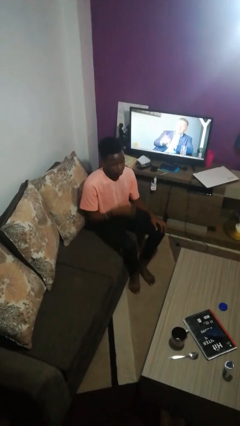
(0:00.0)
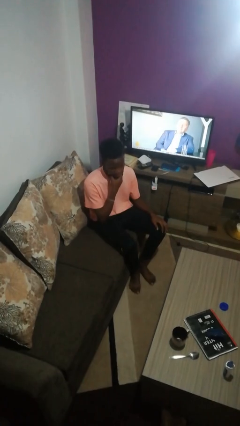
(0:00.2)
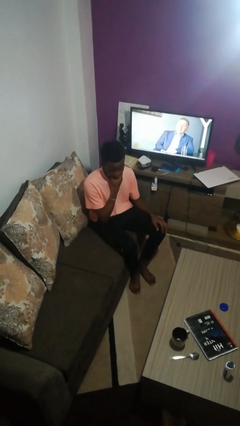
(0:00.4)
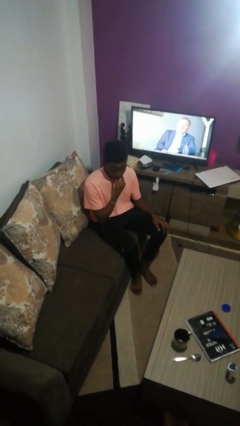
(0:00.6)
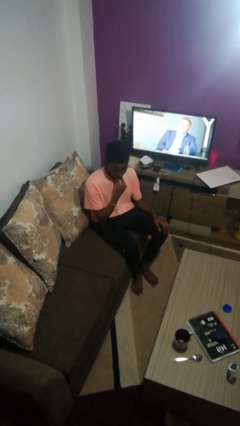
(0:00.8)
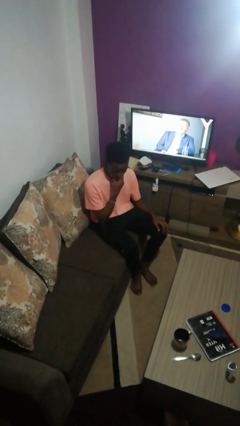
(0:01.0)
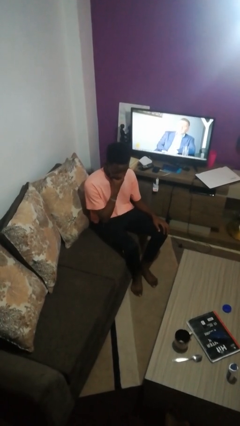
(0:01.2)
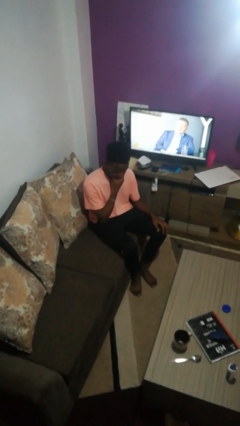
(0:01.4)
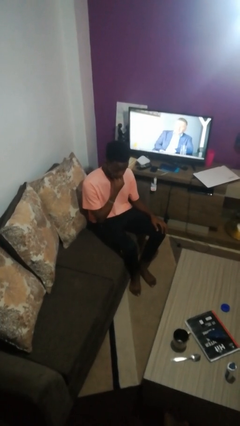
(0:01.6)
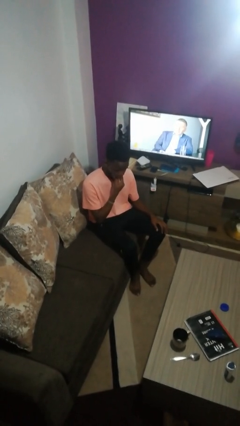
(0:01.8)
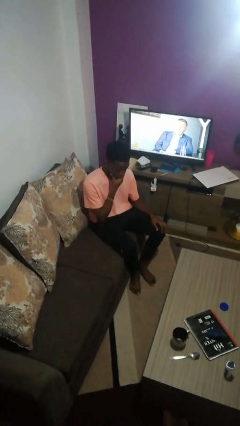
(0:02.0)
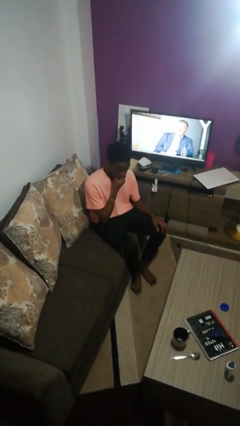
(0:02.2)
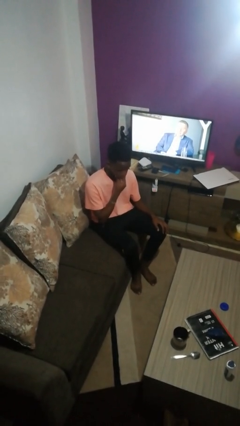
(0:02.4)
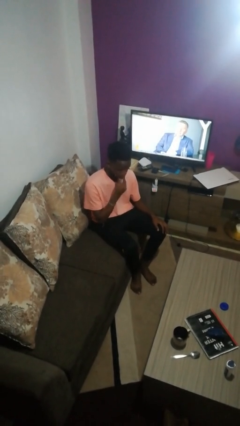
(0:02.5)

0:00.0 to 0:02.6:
person strokes chin

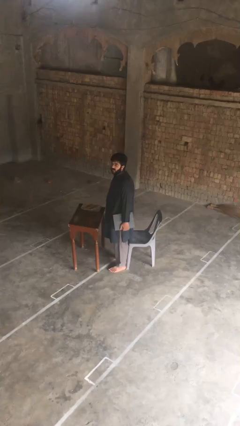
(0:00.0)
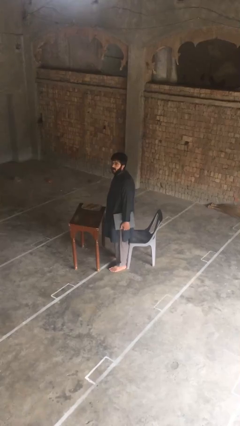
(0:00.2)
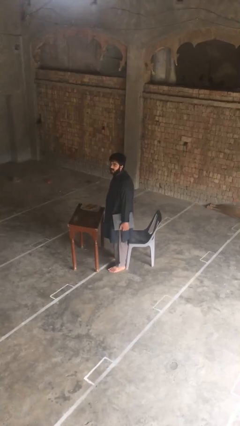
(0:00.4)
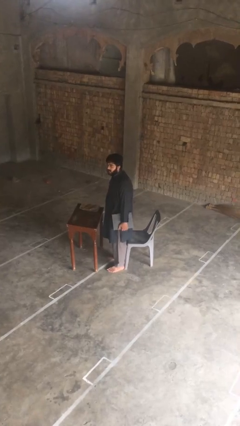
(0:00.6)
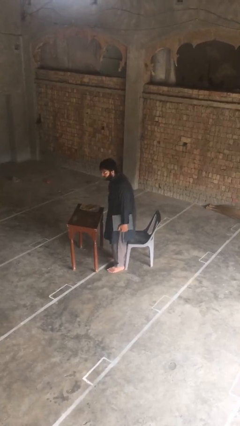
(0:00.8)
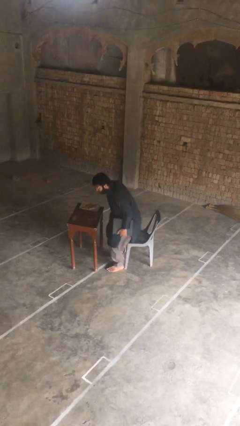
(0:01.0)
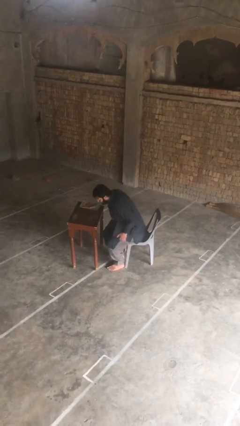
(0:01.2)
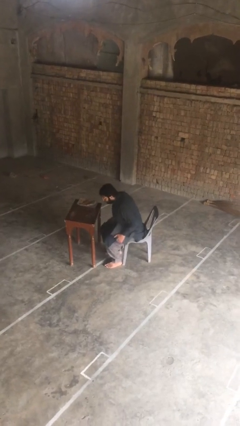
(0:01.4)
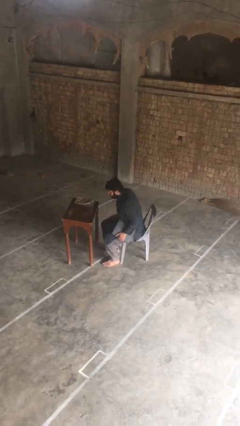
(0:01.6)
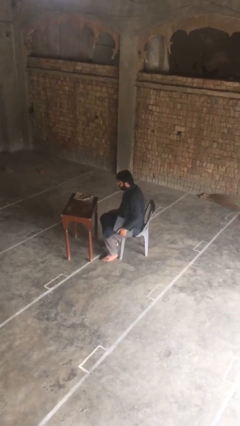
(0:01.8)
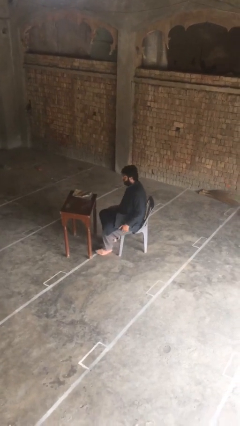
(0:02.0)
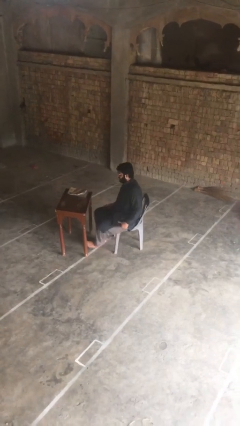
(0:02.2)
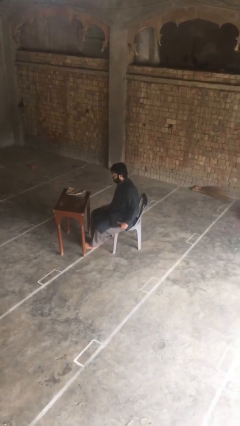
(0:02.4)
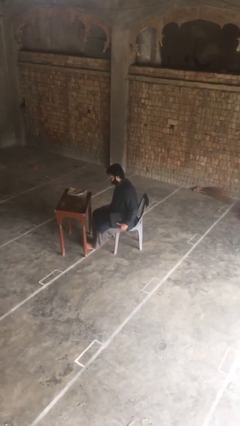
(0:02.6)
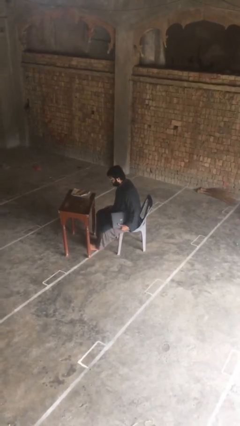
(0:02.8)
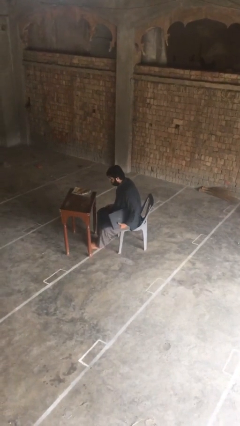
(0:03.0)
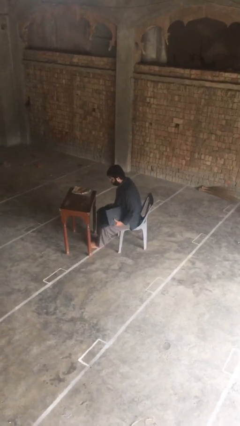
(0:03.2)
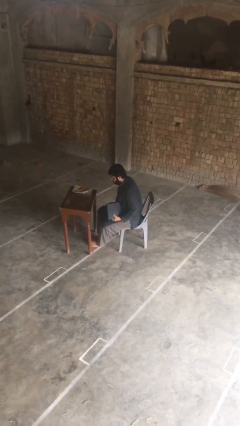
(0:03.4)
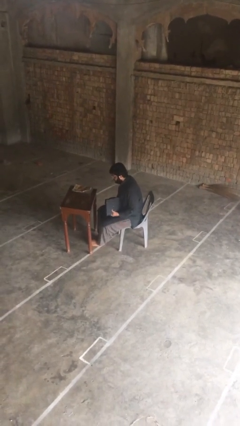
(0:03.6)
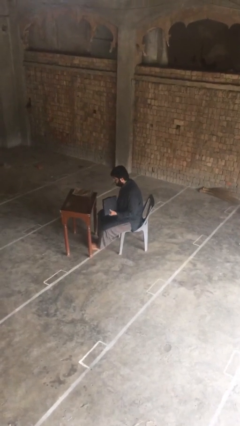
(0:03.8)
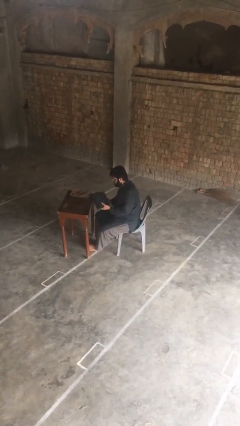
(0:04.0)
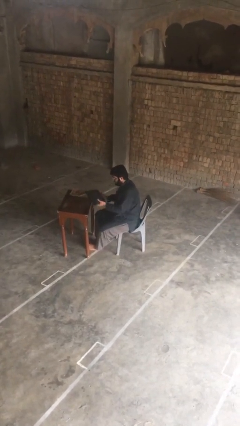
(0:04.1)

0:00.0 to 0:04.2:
person sits down

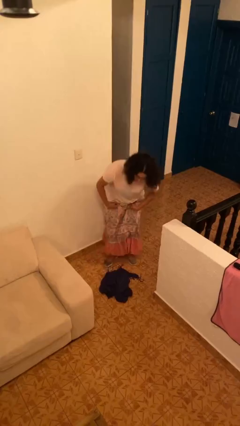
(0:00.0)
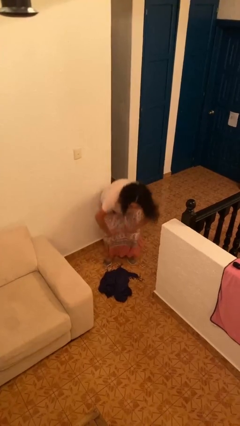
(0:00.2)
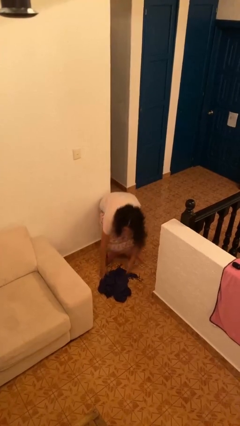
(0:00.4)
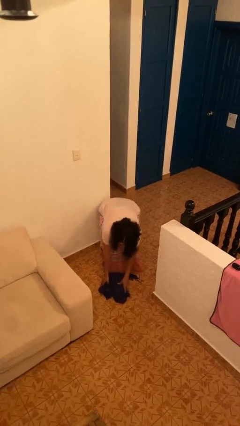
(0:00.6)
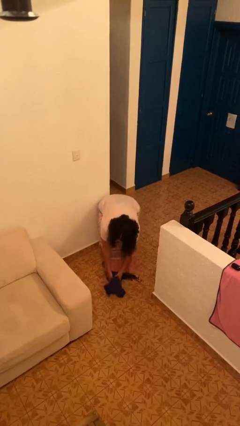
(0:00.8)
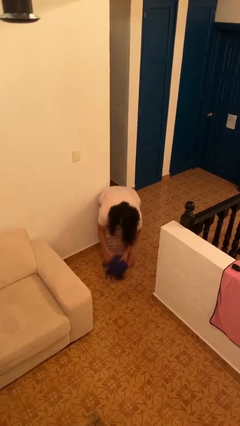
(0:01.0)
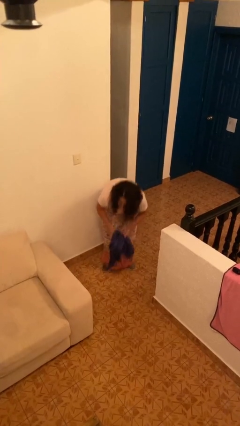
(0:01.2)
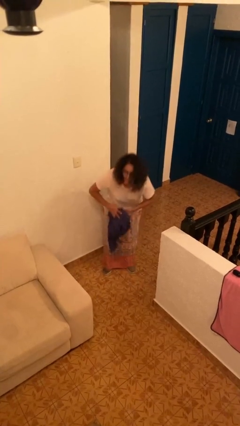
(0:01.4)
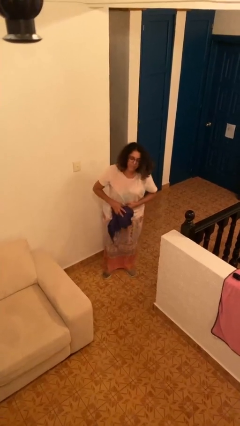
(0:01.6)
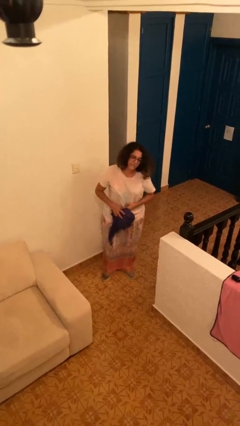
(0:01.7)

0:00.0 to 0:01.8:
person picks up object from floor

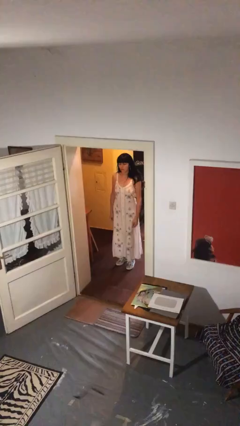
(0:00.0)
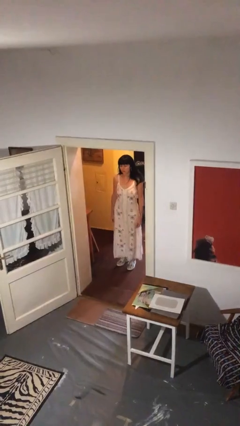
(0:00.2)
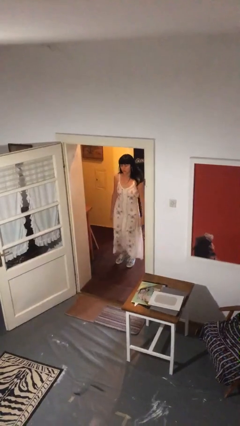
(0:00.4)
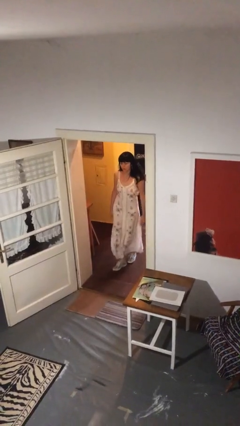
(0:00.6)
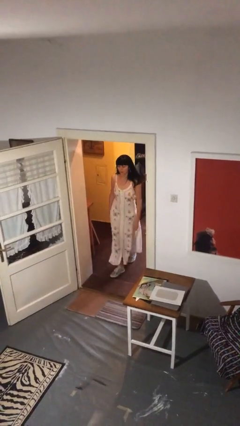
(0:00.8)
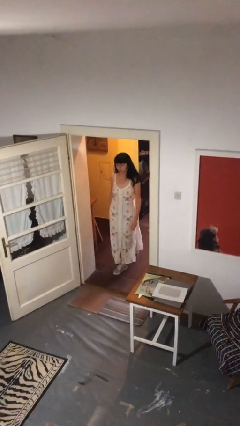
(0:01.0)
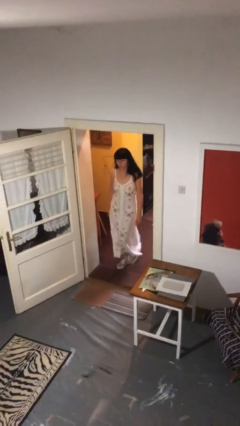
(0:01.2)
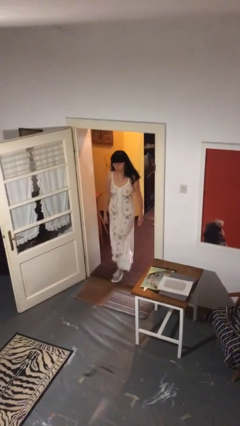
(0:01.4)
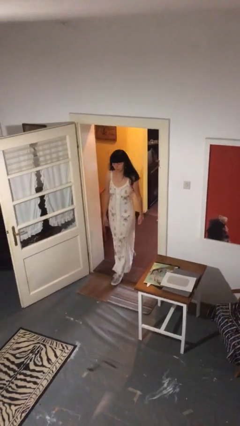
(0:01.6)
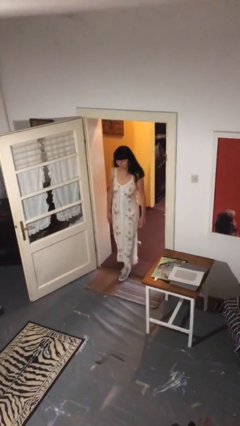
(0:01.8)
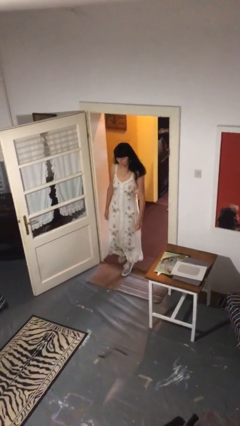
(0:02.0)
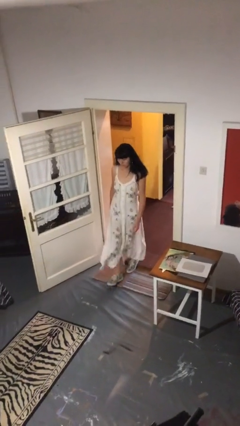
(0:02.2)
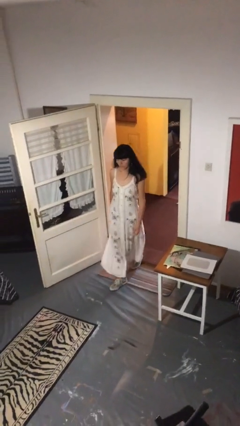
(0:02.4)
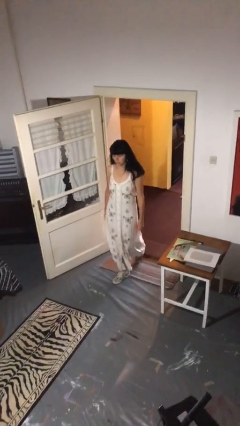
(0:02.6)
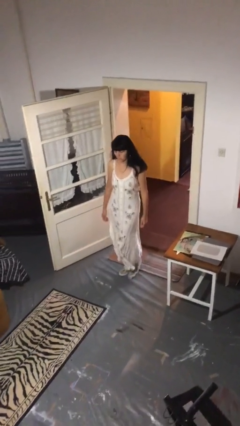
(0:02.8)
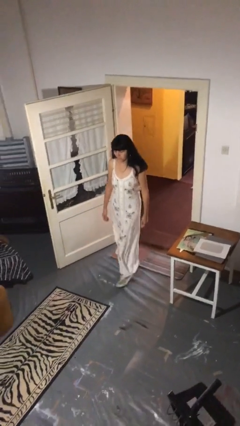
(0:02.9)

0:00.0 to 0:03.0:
person enters scene through structure

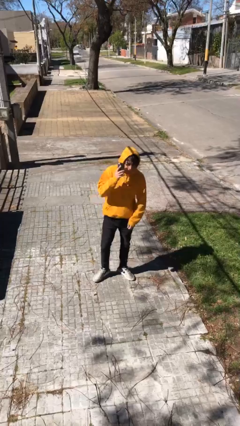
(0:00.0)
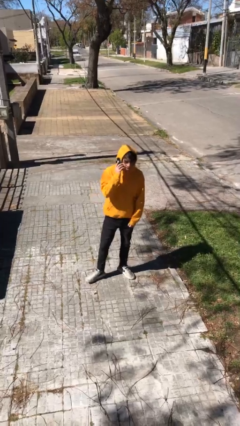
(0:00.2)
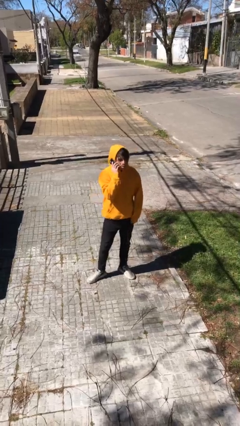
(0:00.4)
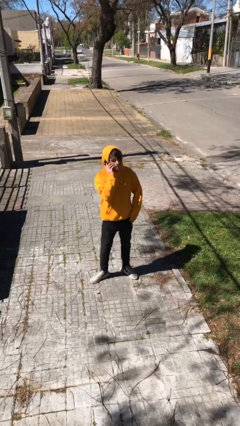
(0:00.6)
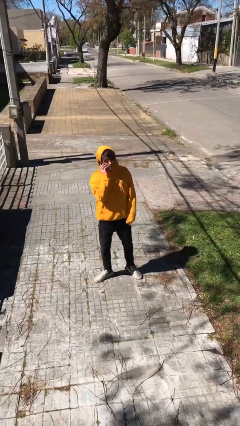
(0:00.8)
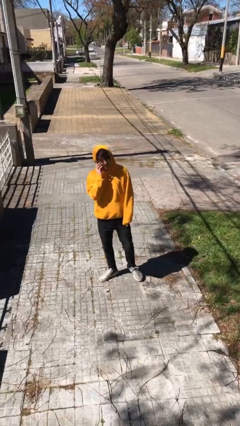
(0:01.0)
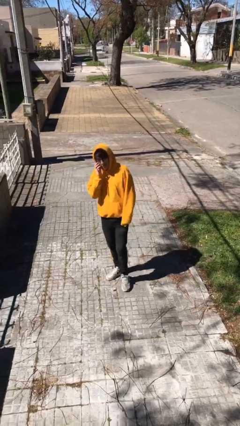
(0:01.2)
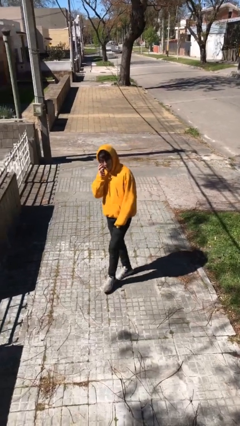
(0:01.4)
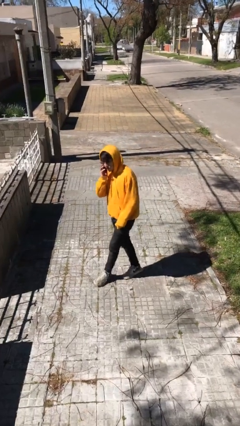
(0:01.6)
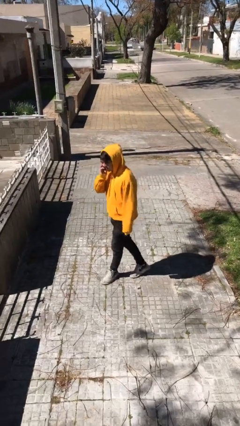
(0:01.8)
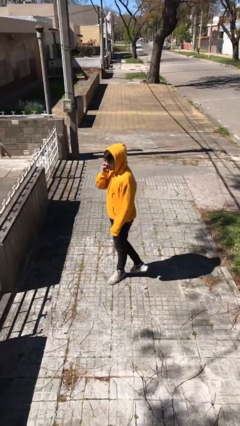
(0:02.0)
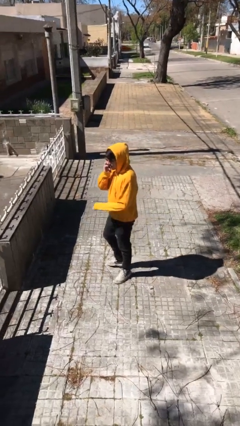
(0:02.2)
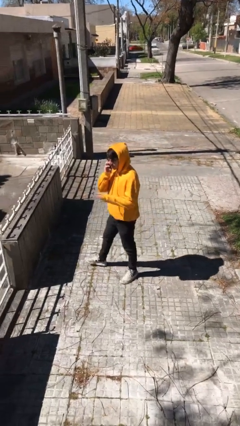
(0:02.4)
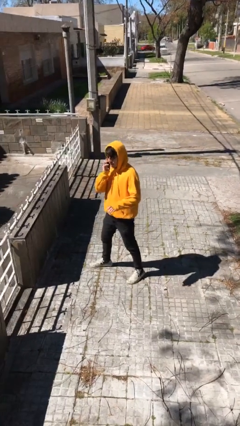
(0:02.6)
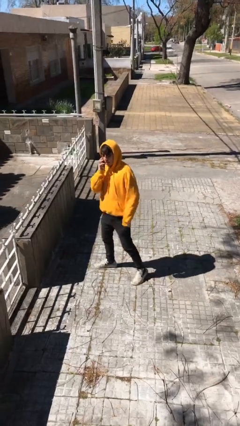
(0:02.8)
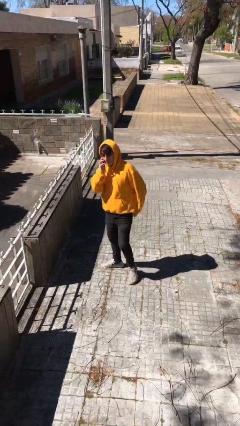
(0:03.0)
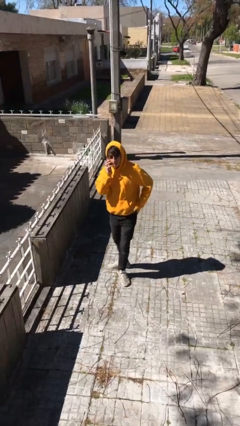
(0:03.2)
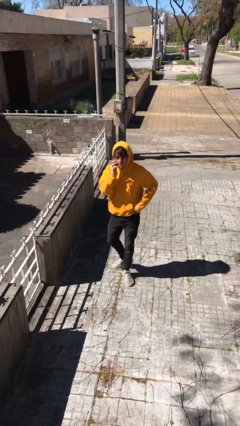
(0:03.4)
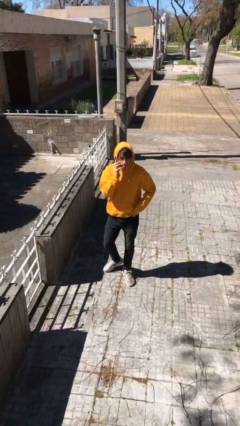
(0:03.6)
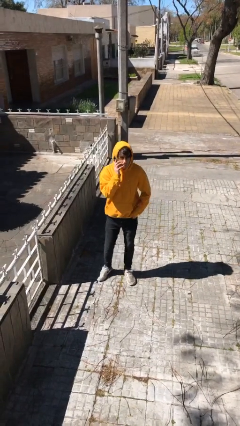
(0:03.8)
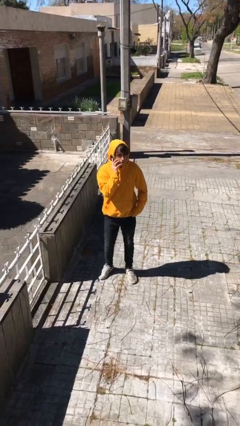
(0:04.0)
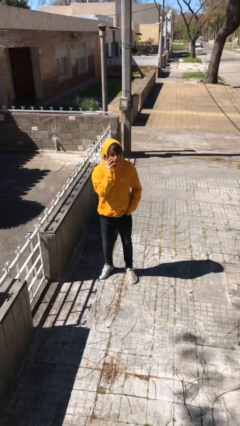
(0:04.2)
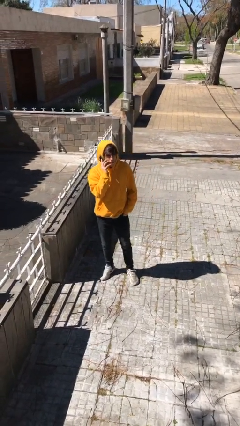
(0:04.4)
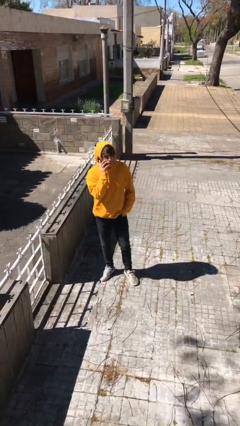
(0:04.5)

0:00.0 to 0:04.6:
person talks on phone

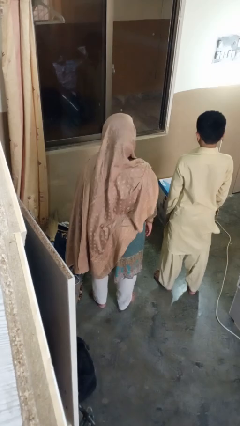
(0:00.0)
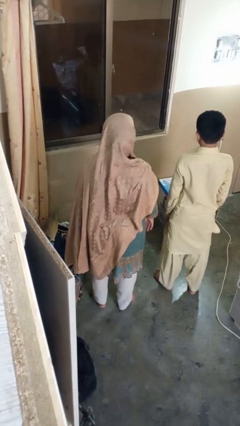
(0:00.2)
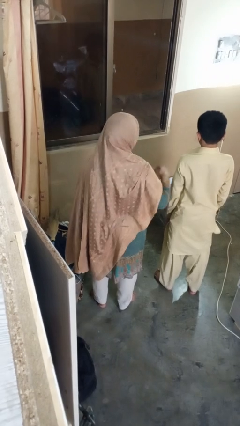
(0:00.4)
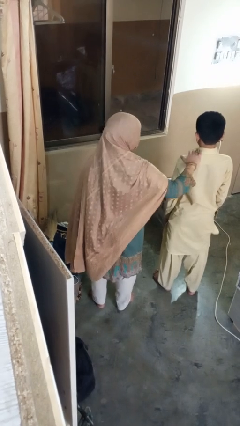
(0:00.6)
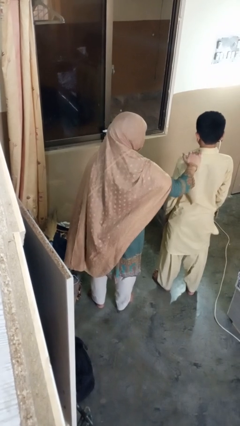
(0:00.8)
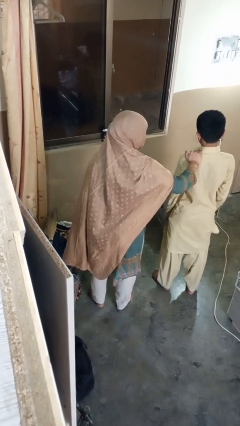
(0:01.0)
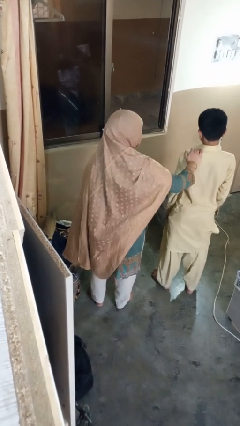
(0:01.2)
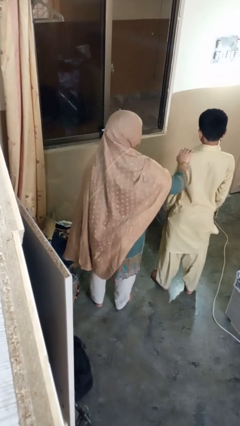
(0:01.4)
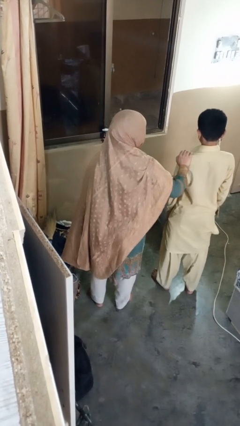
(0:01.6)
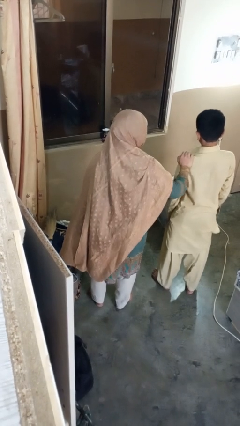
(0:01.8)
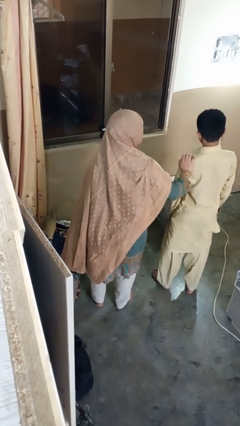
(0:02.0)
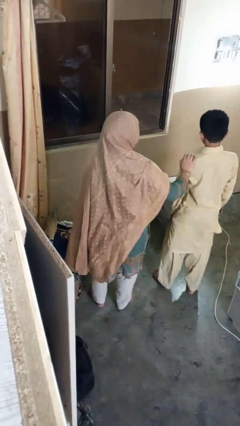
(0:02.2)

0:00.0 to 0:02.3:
person grabs person by bicep
